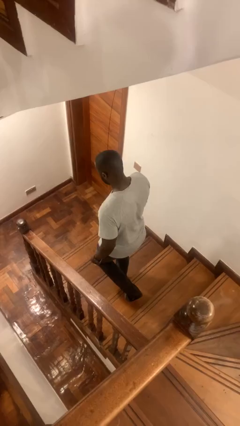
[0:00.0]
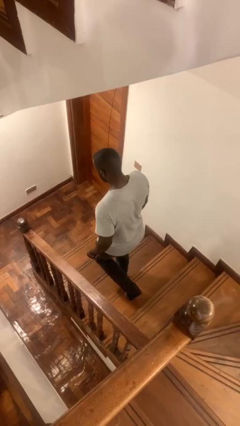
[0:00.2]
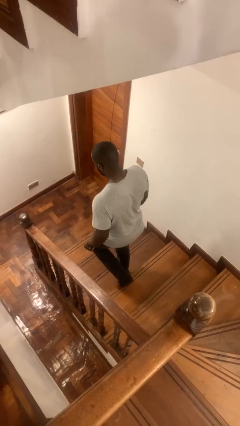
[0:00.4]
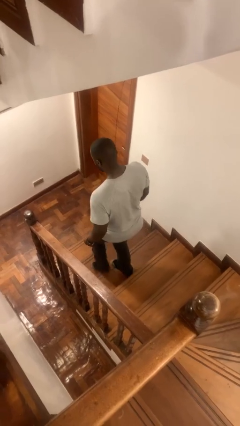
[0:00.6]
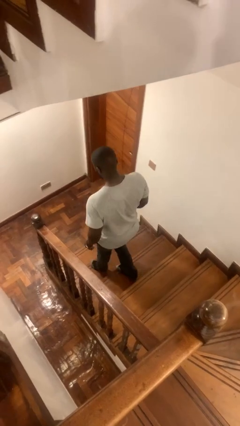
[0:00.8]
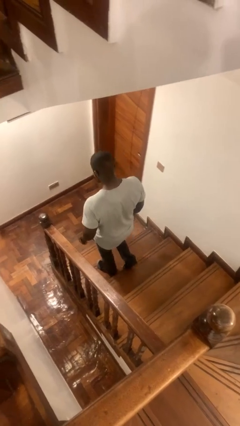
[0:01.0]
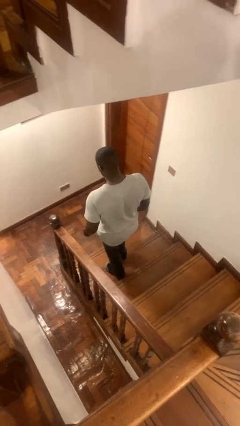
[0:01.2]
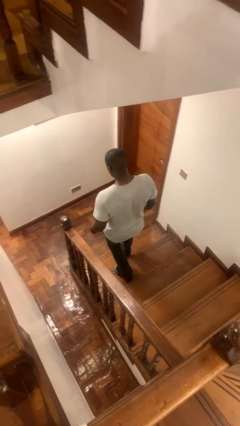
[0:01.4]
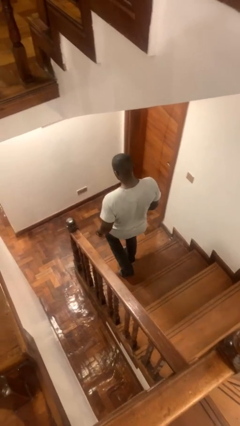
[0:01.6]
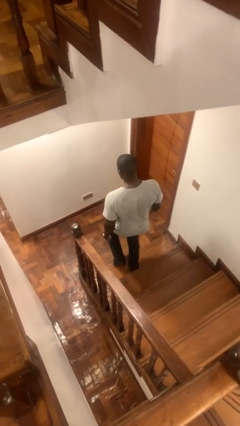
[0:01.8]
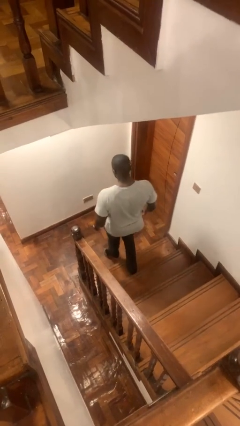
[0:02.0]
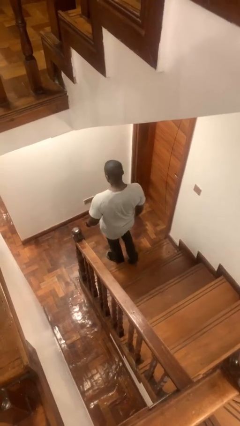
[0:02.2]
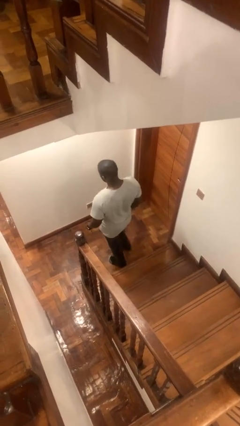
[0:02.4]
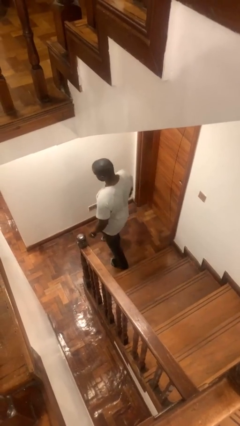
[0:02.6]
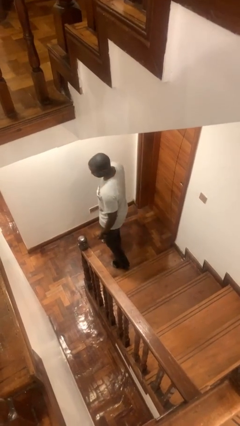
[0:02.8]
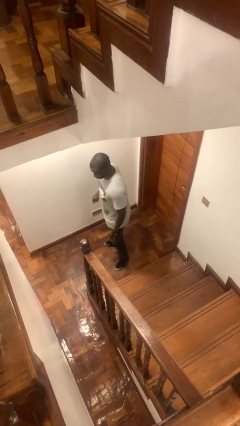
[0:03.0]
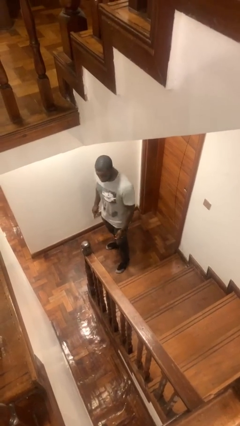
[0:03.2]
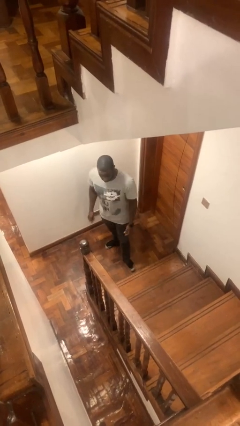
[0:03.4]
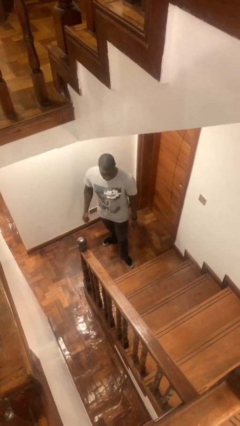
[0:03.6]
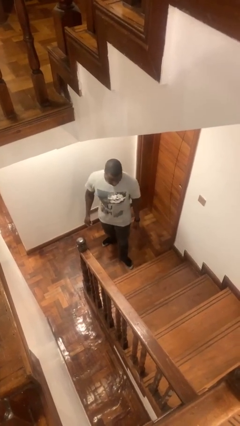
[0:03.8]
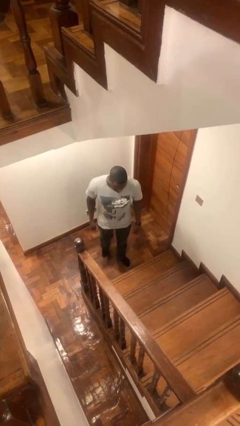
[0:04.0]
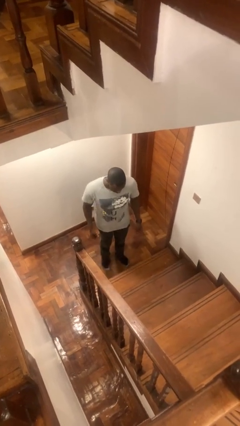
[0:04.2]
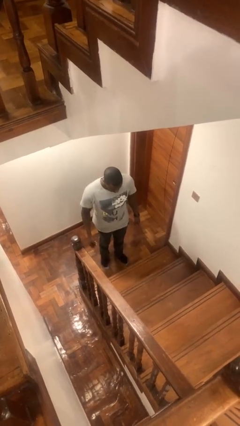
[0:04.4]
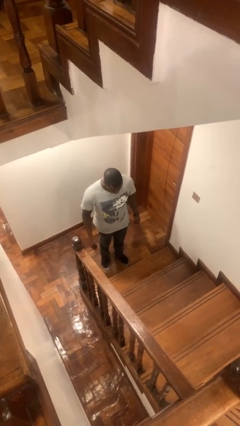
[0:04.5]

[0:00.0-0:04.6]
person climbs down stairs

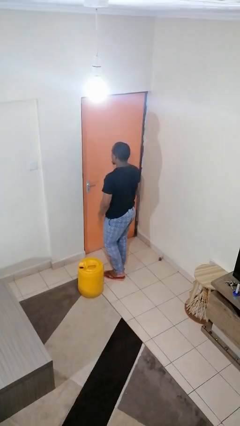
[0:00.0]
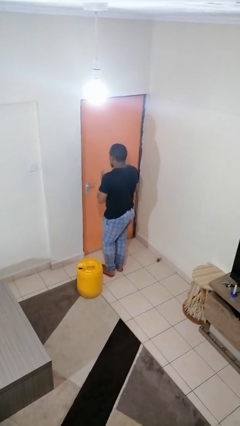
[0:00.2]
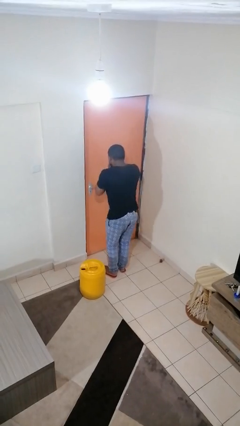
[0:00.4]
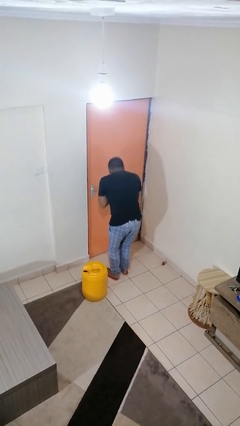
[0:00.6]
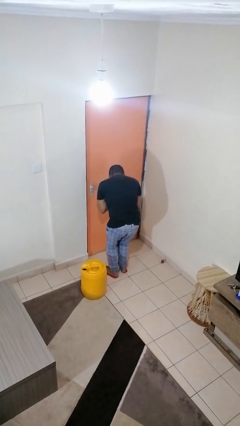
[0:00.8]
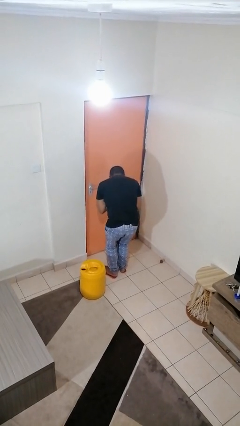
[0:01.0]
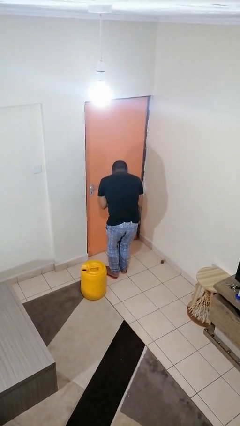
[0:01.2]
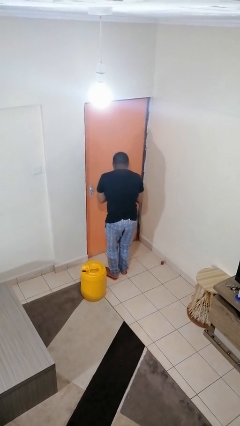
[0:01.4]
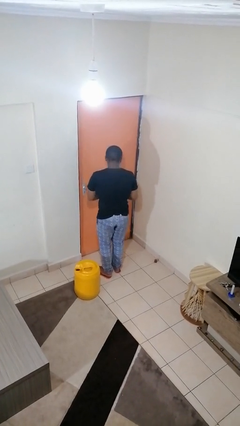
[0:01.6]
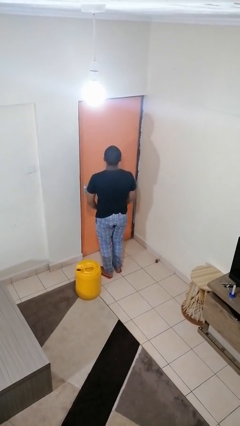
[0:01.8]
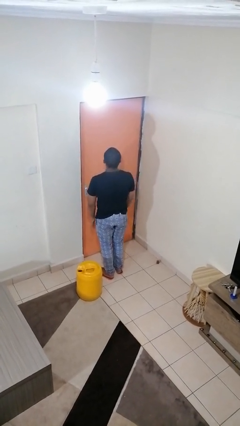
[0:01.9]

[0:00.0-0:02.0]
person sneezes into hand

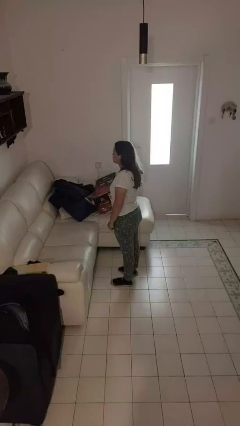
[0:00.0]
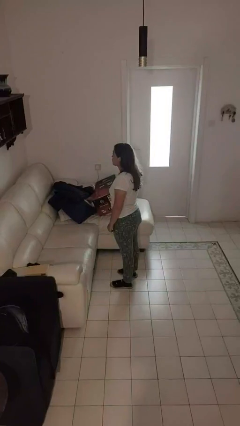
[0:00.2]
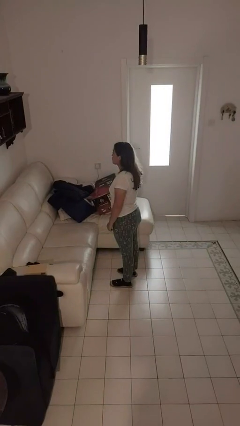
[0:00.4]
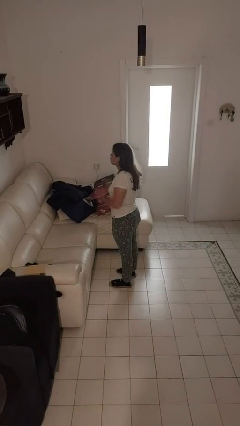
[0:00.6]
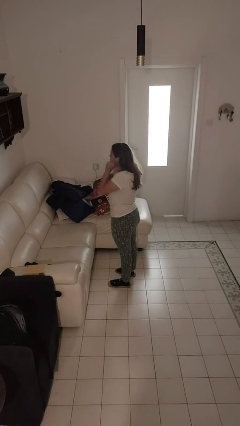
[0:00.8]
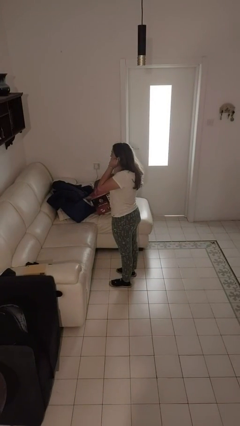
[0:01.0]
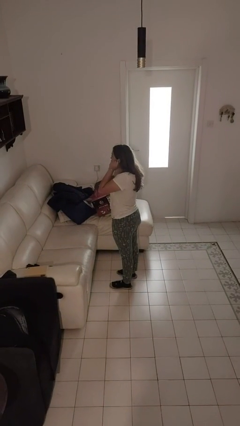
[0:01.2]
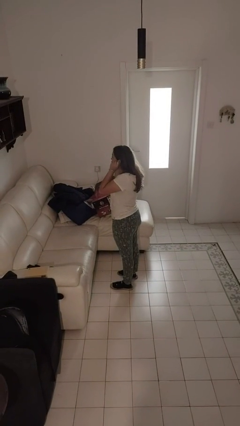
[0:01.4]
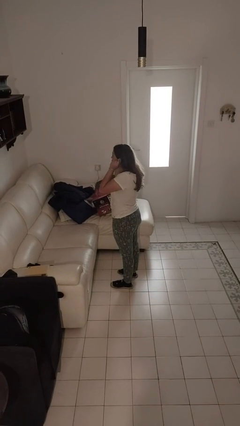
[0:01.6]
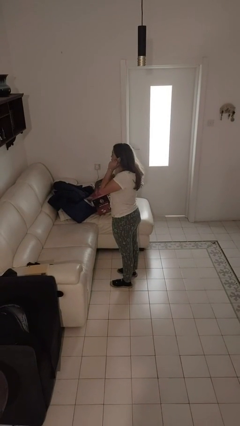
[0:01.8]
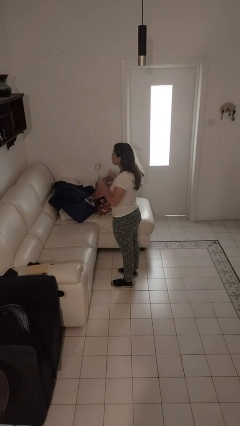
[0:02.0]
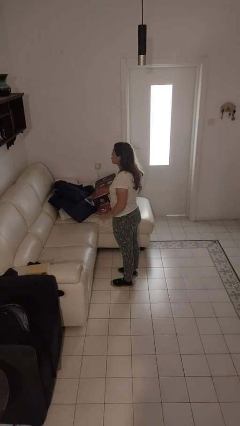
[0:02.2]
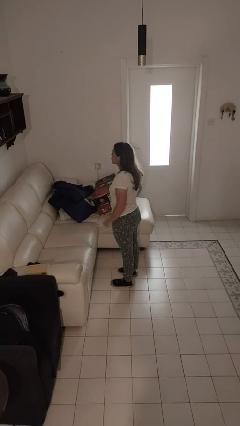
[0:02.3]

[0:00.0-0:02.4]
person touches earlobe

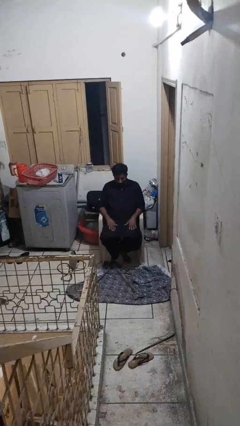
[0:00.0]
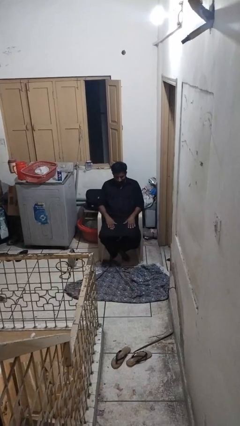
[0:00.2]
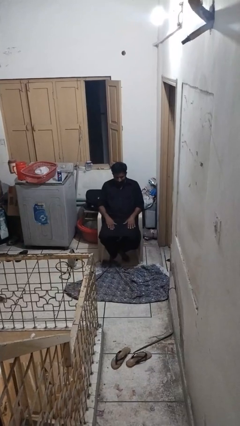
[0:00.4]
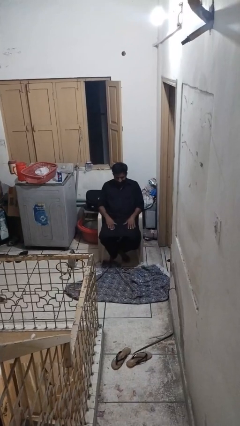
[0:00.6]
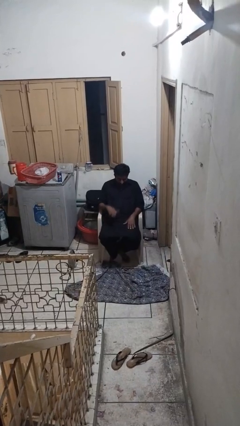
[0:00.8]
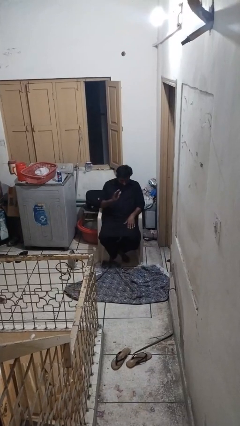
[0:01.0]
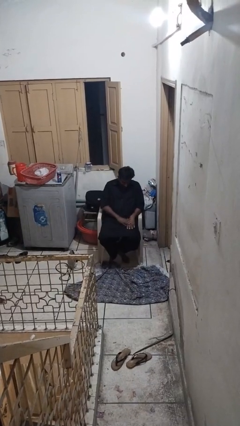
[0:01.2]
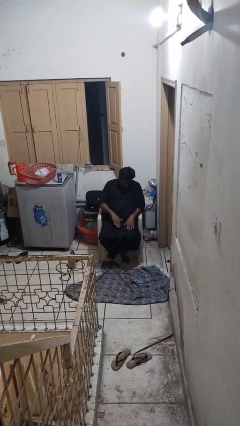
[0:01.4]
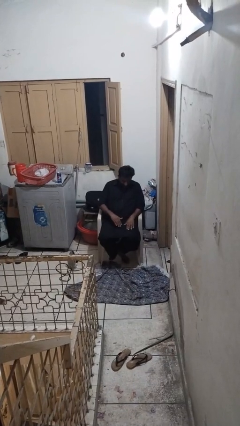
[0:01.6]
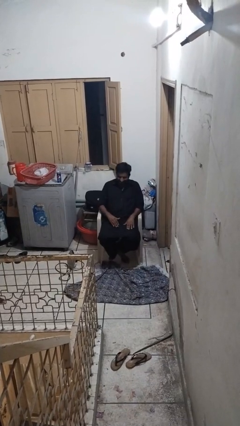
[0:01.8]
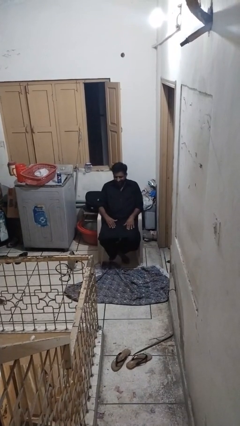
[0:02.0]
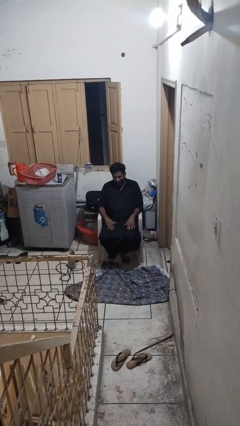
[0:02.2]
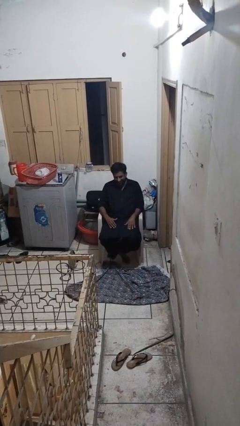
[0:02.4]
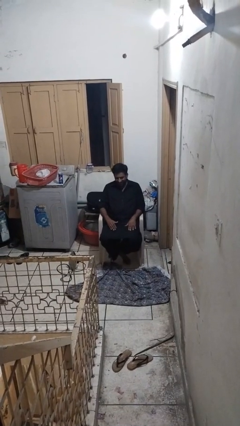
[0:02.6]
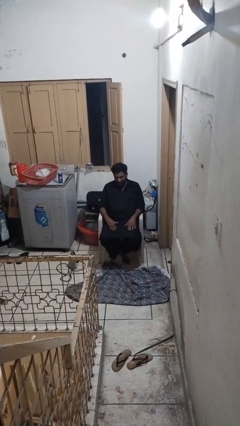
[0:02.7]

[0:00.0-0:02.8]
person swats bug

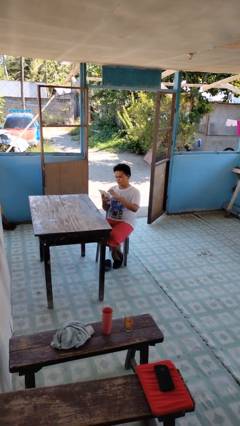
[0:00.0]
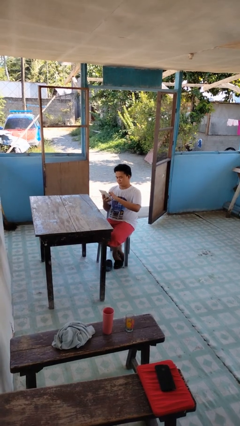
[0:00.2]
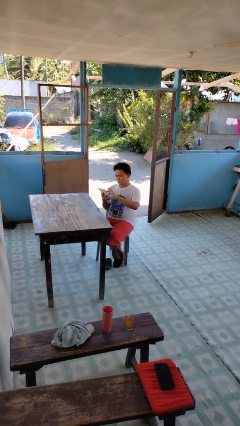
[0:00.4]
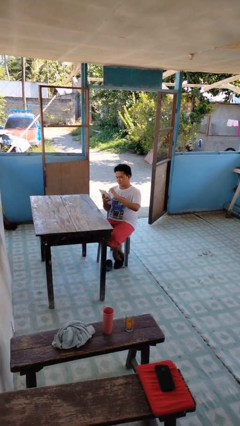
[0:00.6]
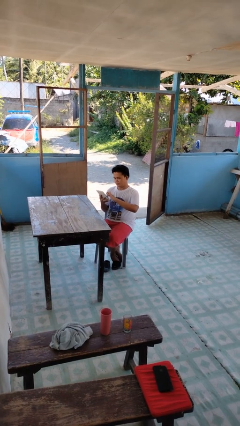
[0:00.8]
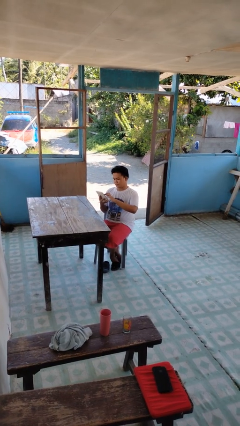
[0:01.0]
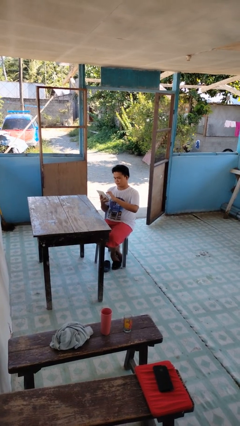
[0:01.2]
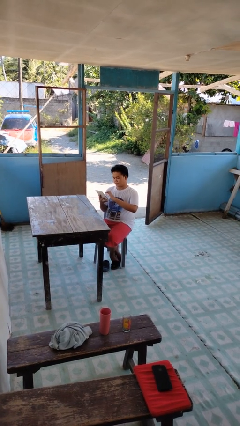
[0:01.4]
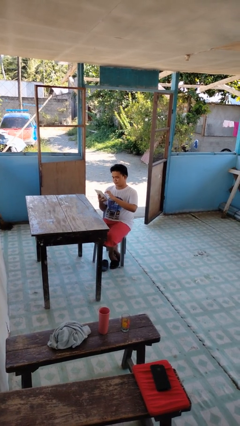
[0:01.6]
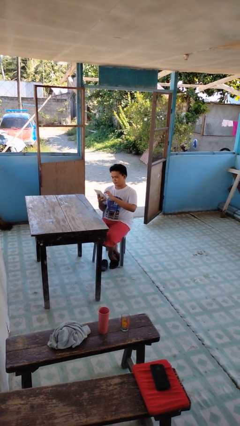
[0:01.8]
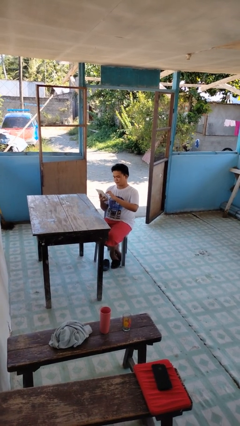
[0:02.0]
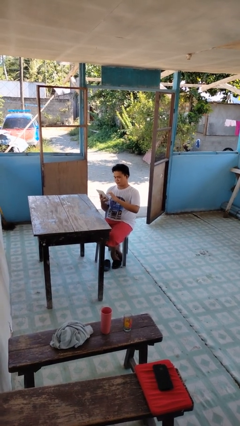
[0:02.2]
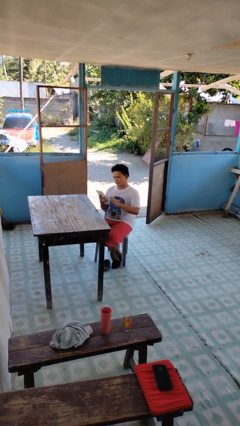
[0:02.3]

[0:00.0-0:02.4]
person interacts with tablet

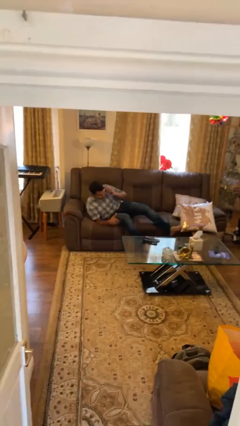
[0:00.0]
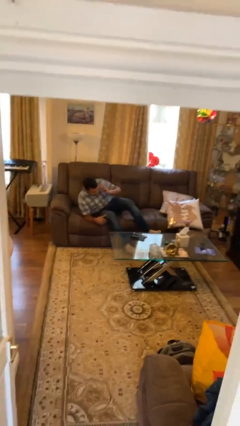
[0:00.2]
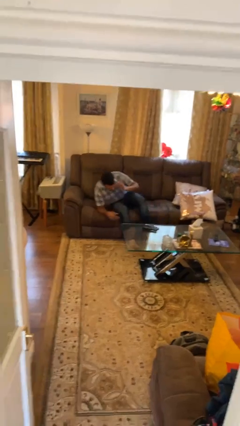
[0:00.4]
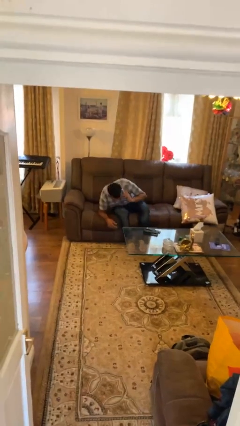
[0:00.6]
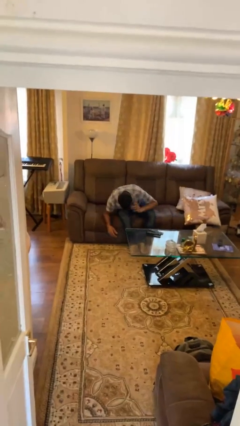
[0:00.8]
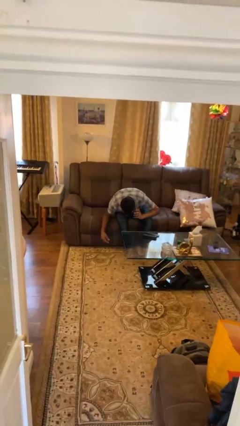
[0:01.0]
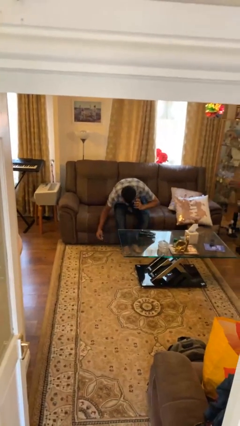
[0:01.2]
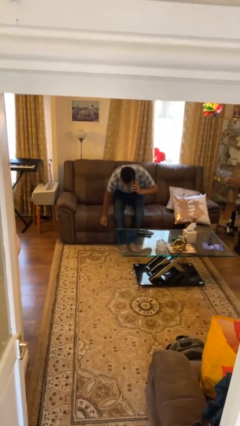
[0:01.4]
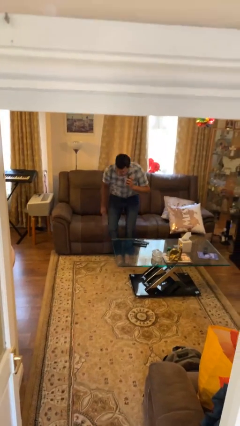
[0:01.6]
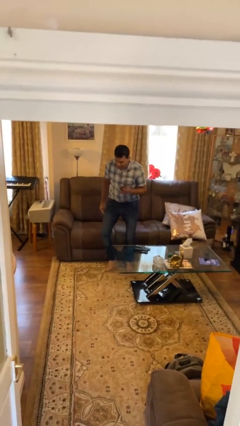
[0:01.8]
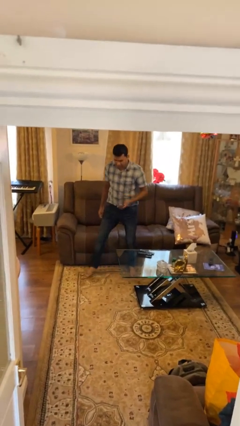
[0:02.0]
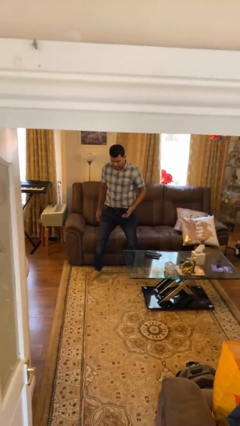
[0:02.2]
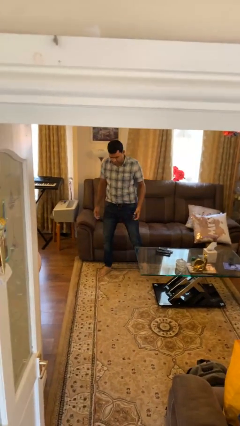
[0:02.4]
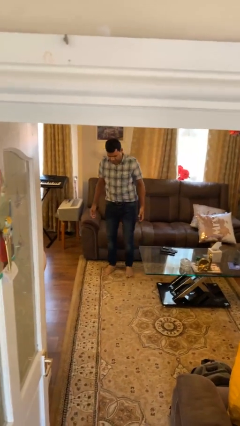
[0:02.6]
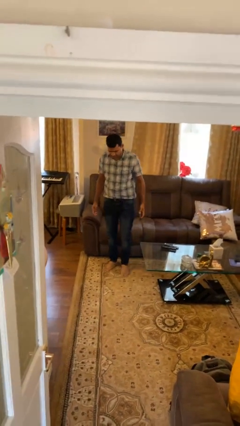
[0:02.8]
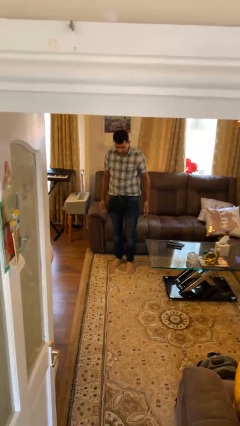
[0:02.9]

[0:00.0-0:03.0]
person stands up
